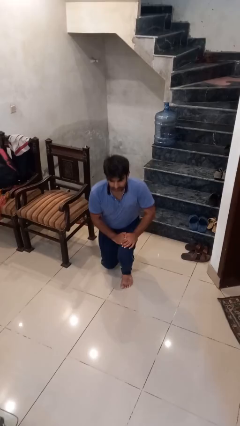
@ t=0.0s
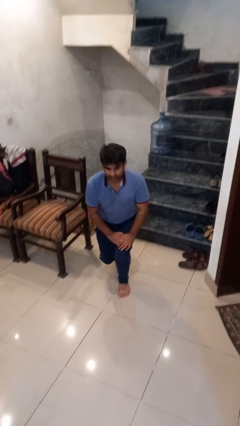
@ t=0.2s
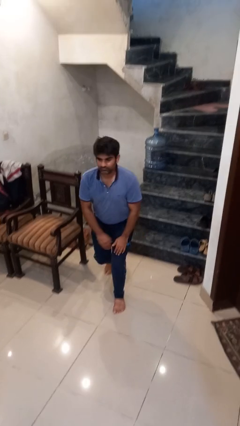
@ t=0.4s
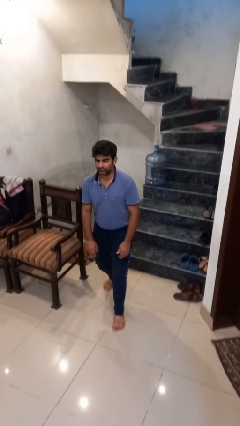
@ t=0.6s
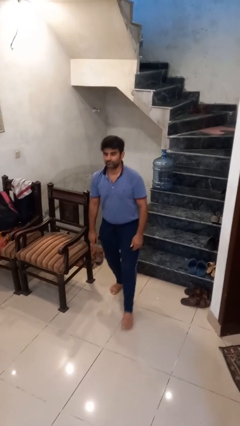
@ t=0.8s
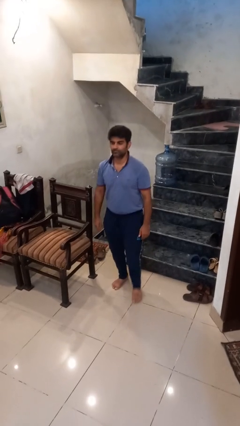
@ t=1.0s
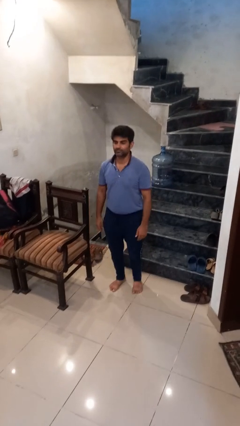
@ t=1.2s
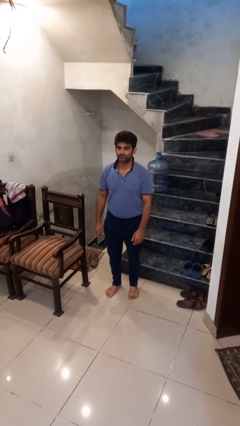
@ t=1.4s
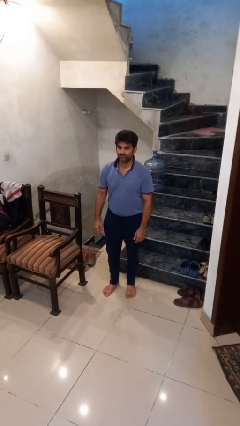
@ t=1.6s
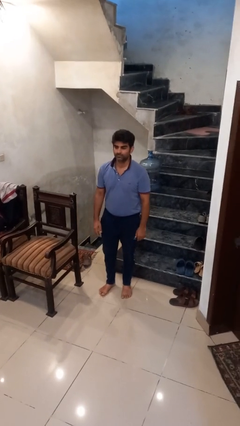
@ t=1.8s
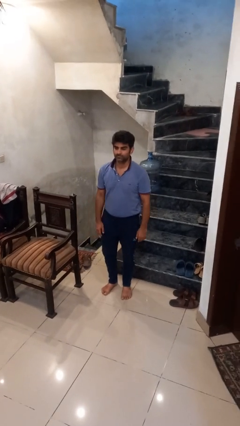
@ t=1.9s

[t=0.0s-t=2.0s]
person stands up from floor

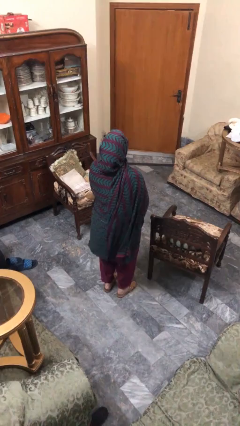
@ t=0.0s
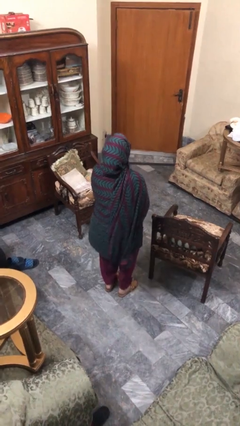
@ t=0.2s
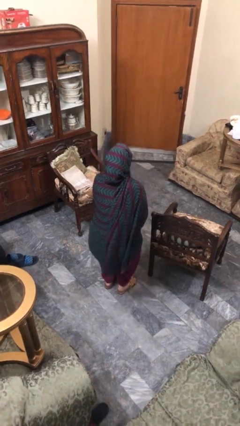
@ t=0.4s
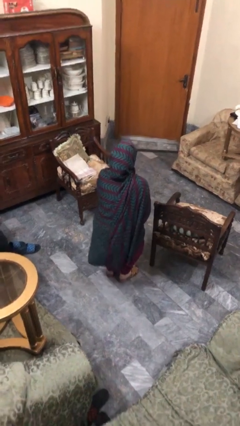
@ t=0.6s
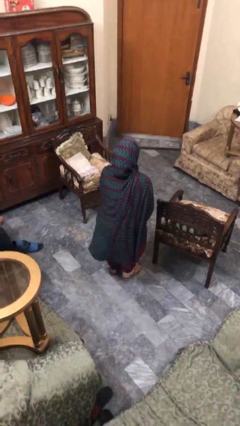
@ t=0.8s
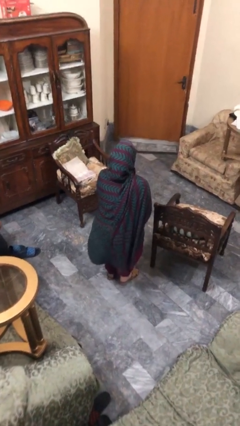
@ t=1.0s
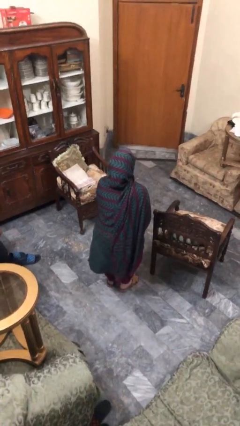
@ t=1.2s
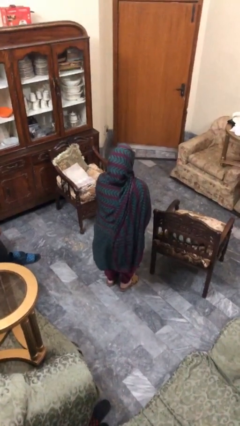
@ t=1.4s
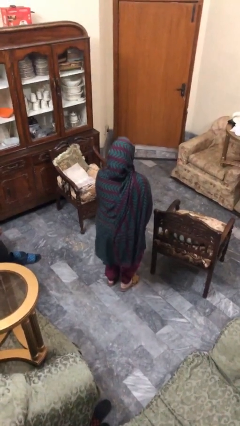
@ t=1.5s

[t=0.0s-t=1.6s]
person squats

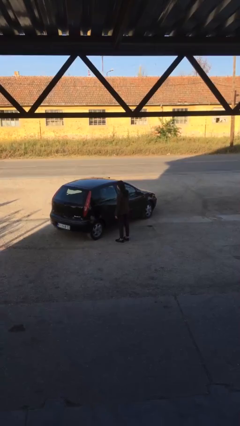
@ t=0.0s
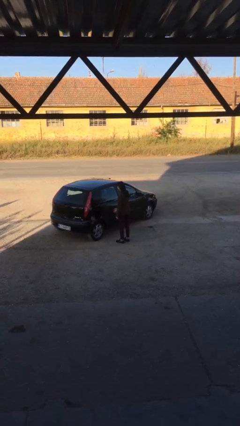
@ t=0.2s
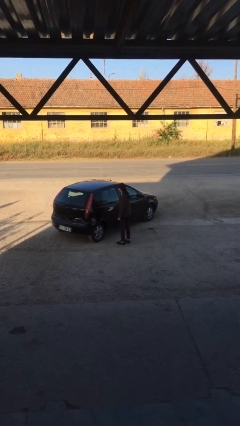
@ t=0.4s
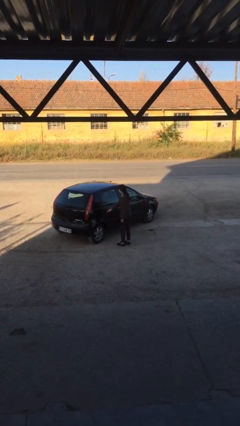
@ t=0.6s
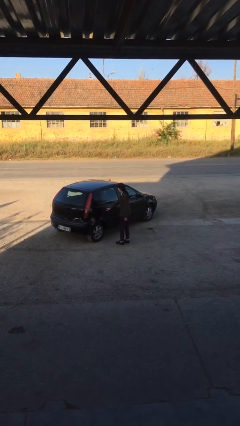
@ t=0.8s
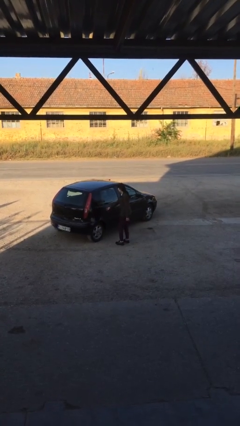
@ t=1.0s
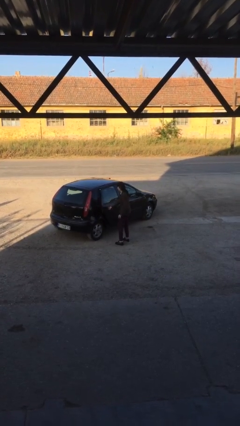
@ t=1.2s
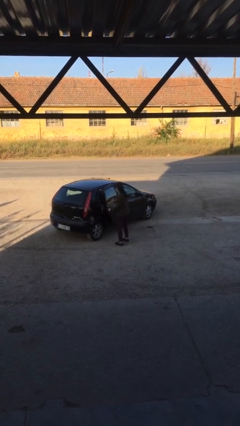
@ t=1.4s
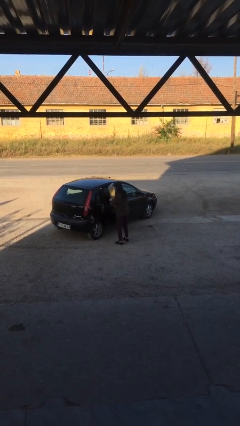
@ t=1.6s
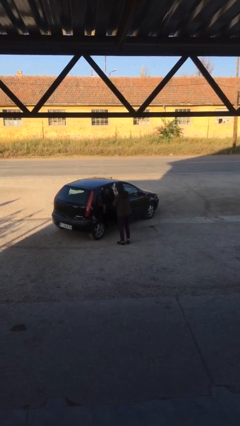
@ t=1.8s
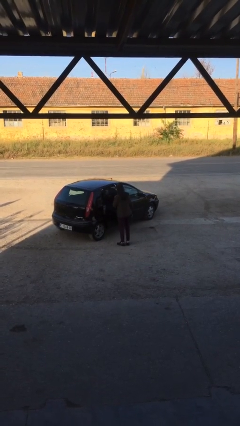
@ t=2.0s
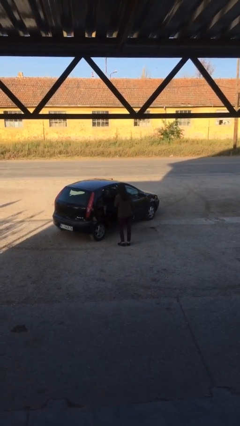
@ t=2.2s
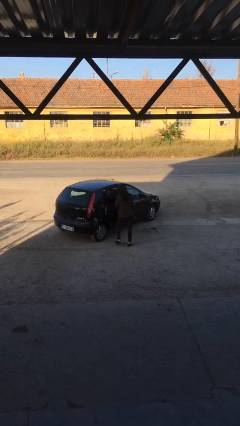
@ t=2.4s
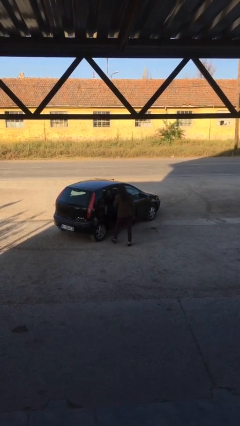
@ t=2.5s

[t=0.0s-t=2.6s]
person opens car door

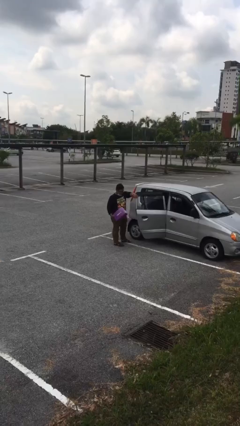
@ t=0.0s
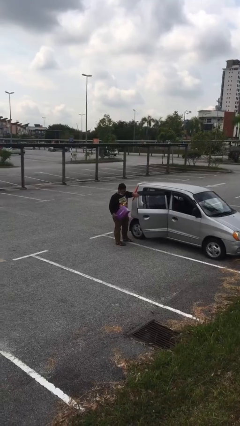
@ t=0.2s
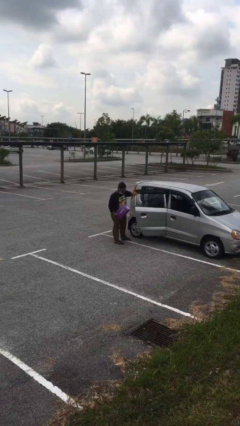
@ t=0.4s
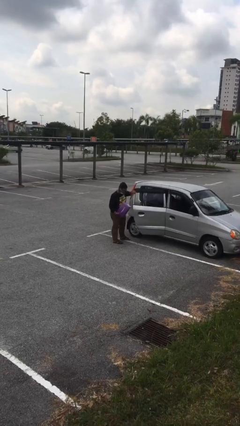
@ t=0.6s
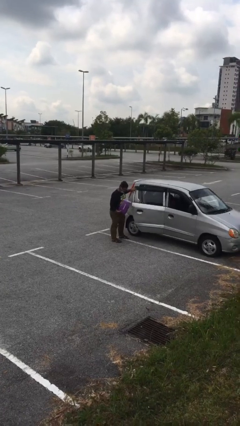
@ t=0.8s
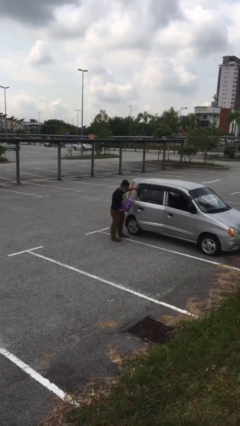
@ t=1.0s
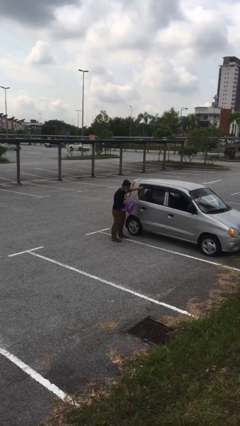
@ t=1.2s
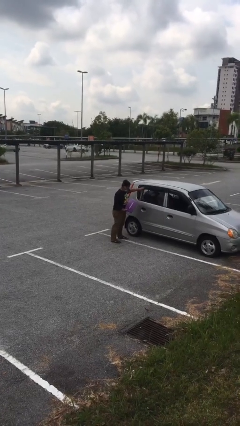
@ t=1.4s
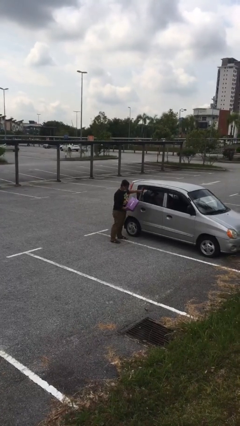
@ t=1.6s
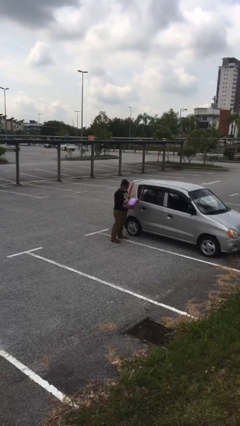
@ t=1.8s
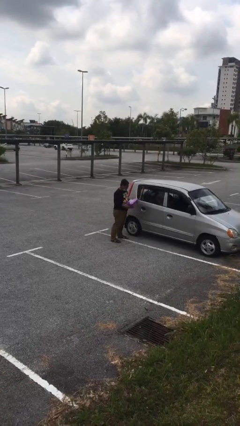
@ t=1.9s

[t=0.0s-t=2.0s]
person closes car door

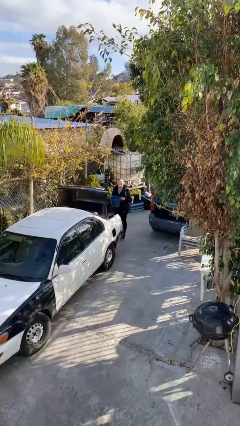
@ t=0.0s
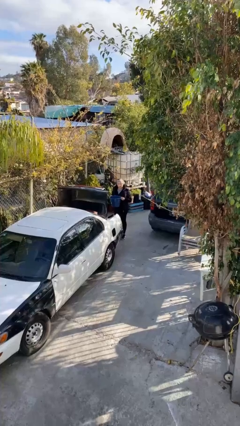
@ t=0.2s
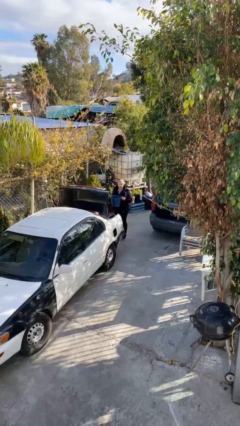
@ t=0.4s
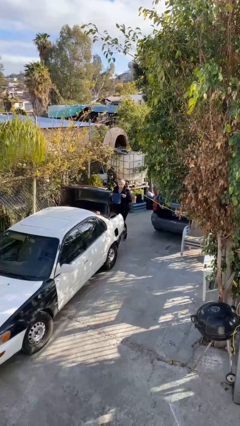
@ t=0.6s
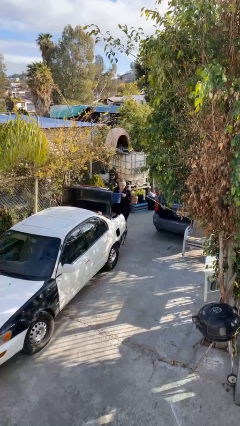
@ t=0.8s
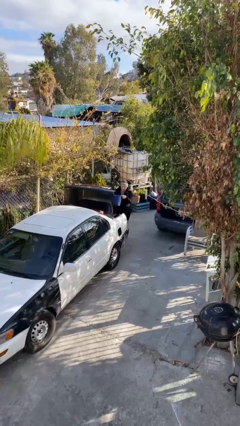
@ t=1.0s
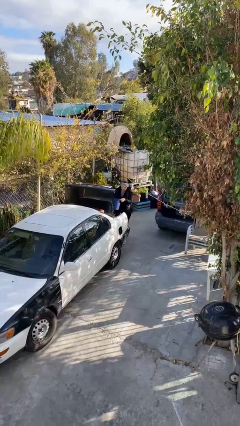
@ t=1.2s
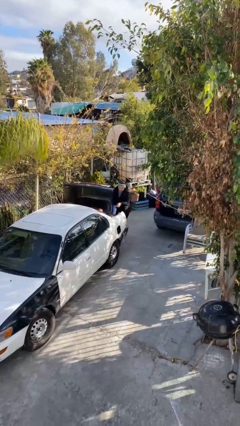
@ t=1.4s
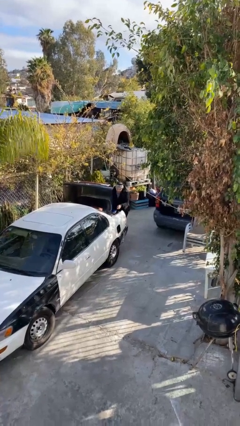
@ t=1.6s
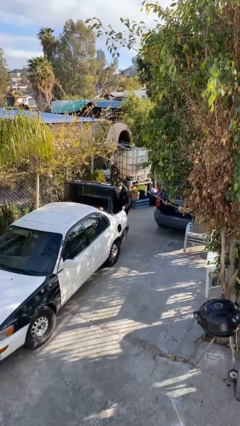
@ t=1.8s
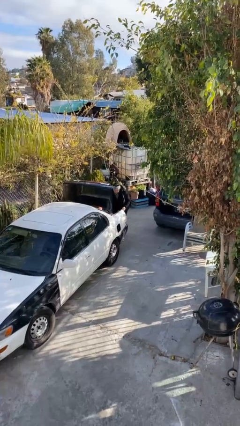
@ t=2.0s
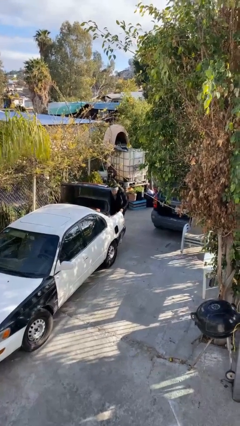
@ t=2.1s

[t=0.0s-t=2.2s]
person loads car

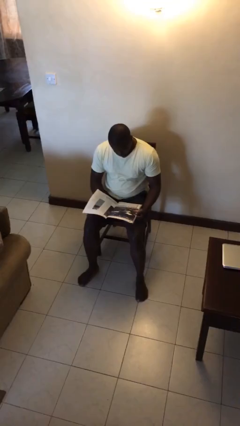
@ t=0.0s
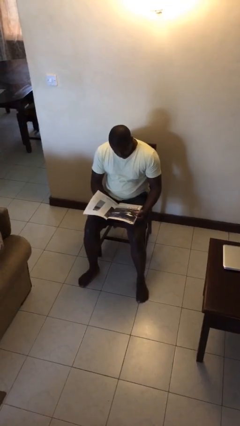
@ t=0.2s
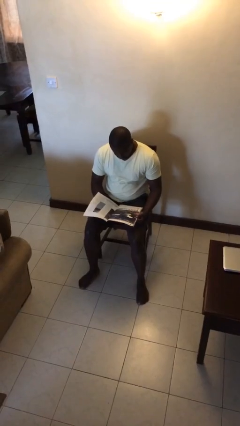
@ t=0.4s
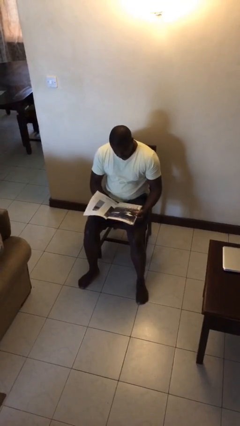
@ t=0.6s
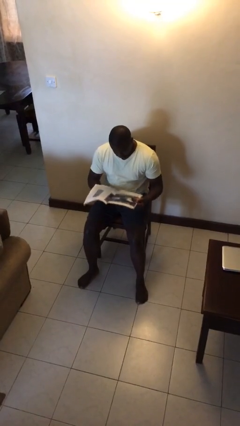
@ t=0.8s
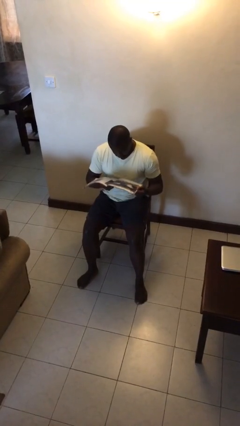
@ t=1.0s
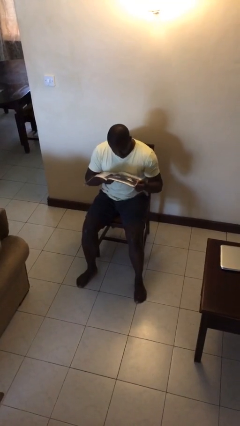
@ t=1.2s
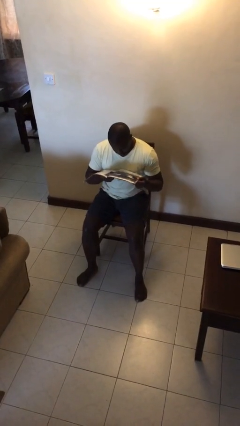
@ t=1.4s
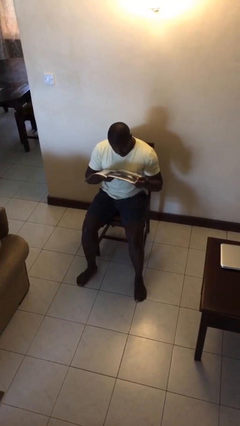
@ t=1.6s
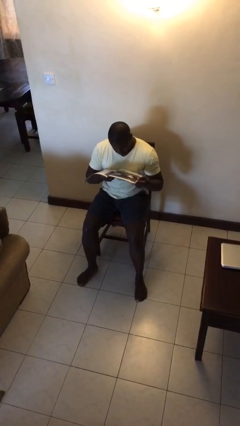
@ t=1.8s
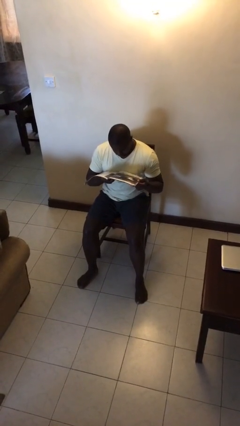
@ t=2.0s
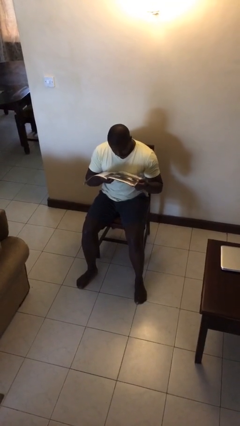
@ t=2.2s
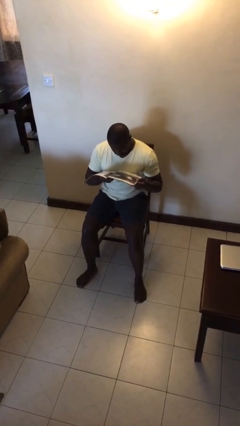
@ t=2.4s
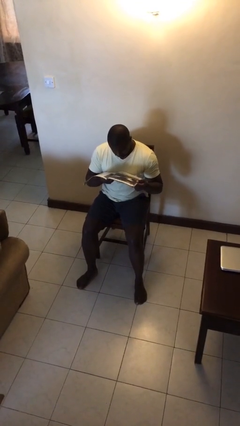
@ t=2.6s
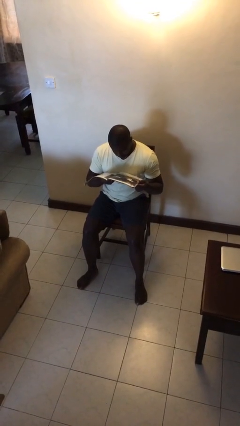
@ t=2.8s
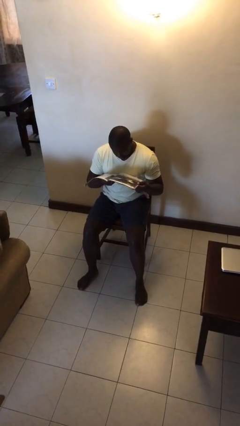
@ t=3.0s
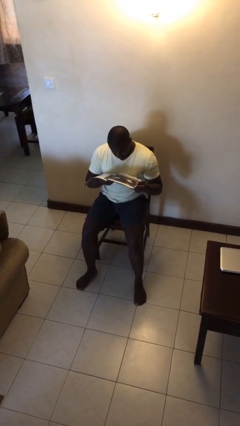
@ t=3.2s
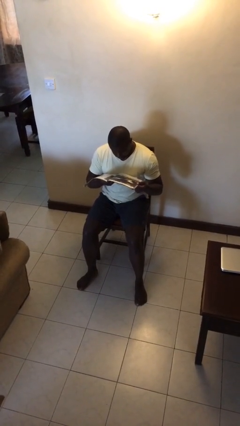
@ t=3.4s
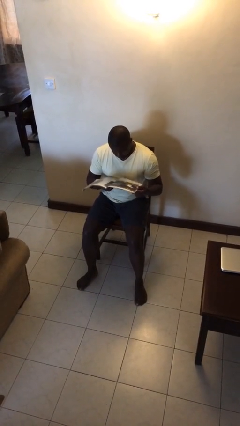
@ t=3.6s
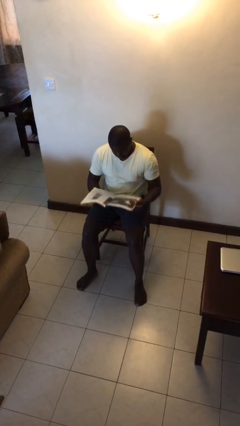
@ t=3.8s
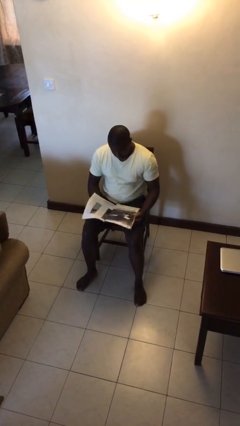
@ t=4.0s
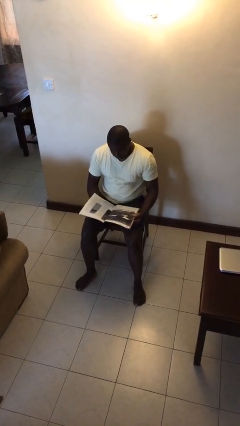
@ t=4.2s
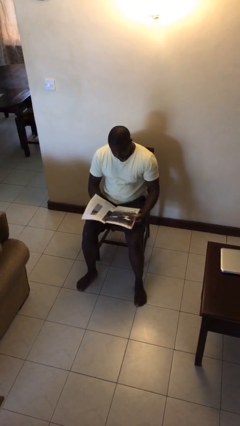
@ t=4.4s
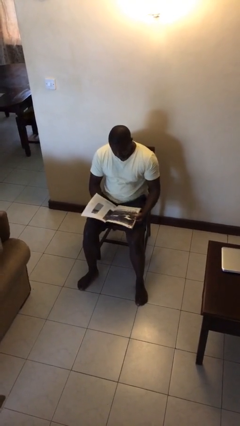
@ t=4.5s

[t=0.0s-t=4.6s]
person reads document

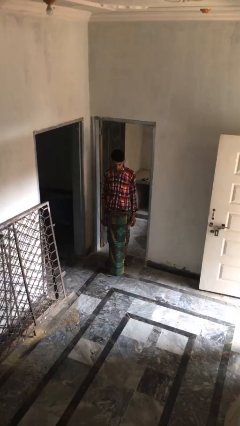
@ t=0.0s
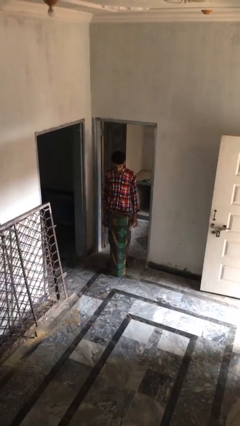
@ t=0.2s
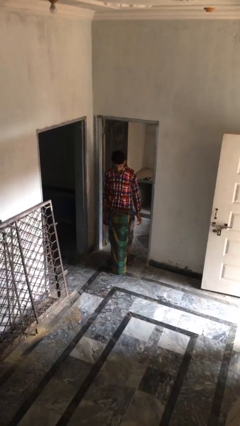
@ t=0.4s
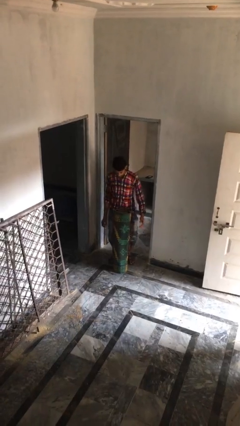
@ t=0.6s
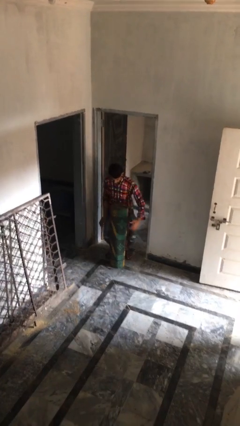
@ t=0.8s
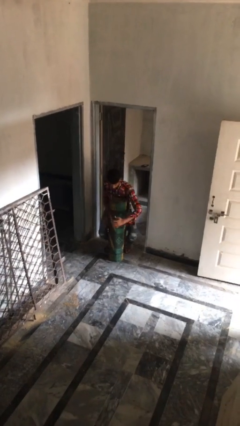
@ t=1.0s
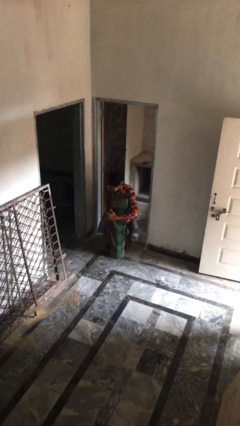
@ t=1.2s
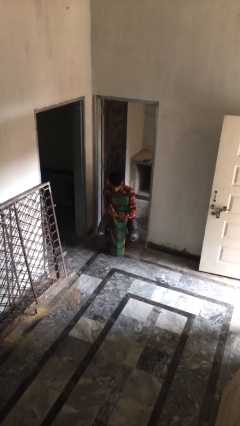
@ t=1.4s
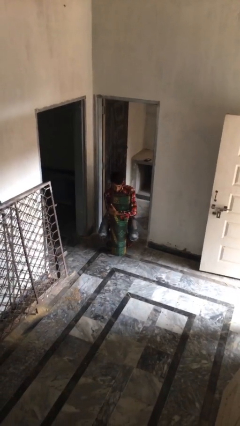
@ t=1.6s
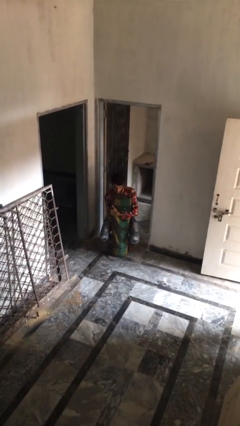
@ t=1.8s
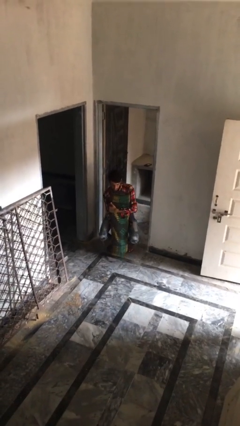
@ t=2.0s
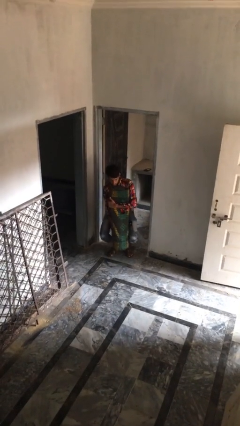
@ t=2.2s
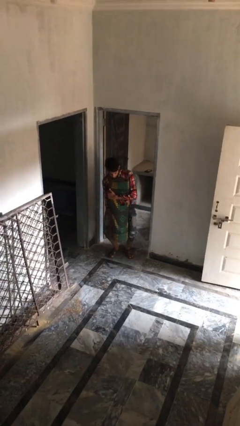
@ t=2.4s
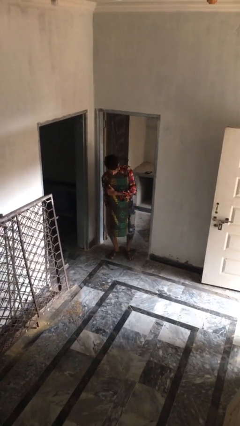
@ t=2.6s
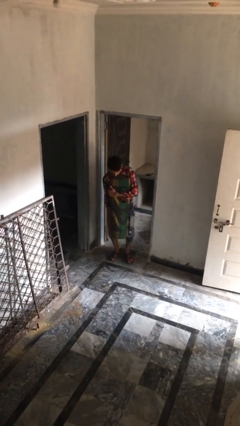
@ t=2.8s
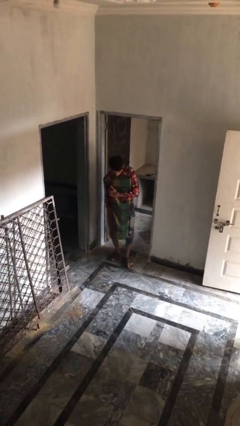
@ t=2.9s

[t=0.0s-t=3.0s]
person picks up object from floor
